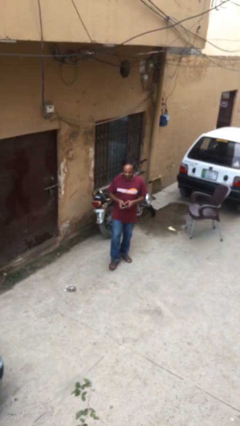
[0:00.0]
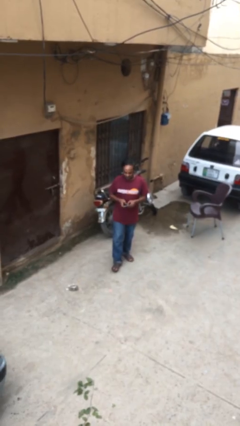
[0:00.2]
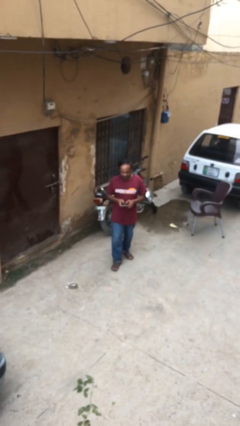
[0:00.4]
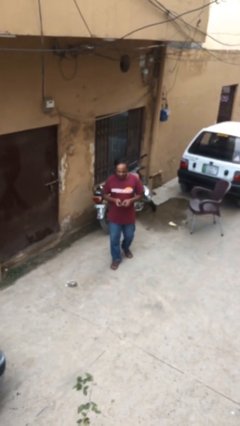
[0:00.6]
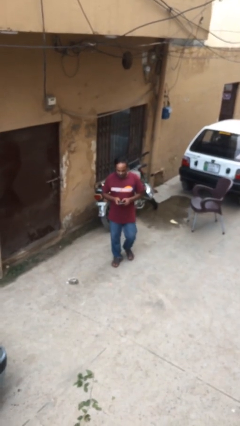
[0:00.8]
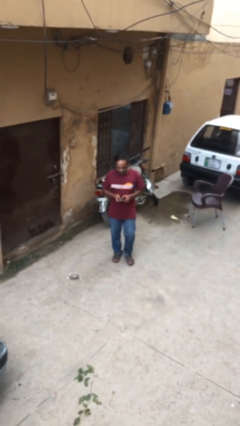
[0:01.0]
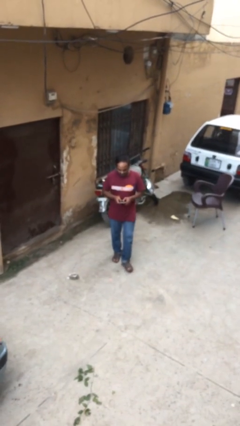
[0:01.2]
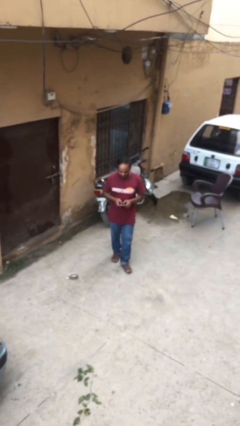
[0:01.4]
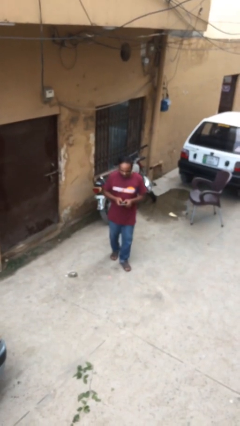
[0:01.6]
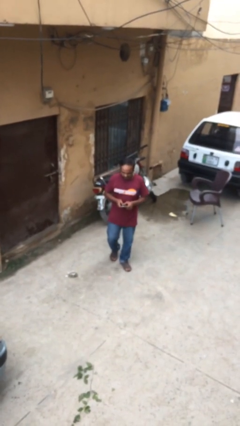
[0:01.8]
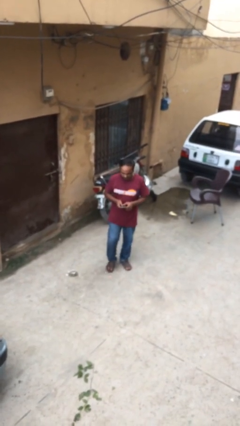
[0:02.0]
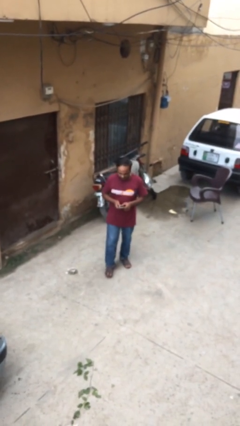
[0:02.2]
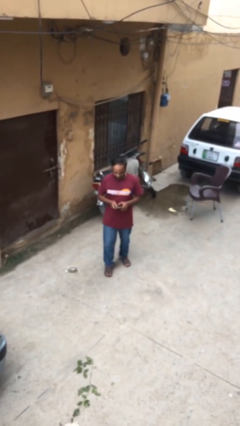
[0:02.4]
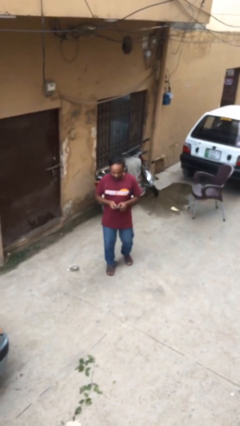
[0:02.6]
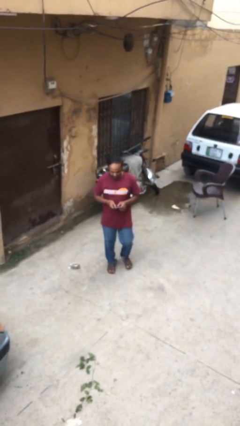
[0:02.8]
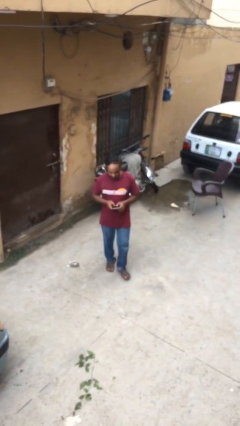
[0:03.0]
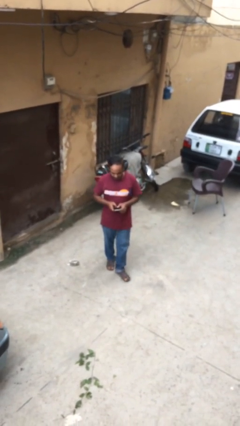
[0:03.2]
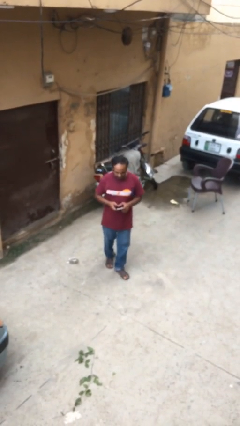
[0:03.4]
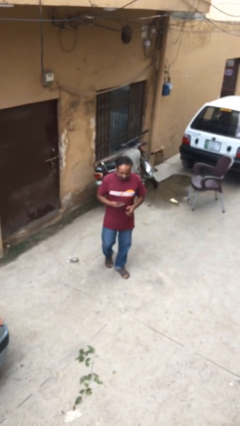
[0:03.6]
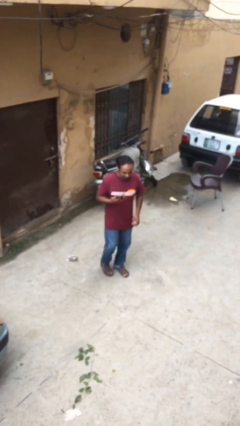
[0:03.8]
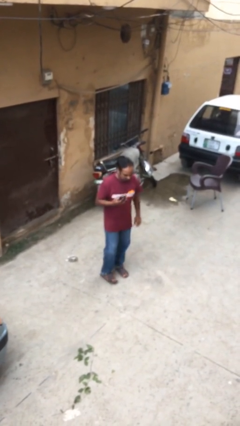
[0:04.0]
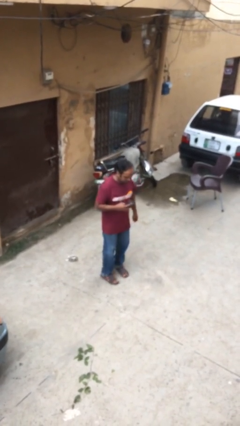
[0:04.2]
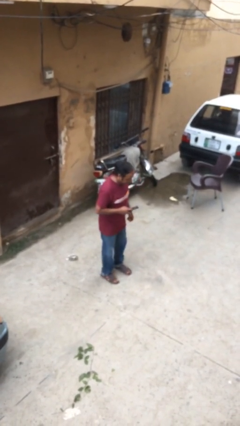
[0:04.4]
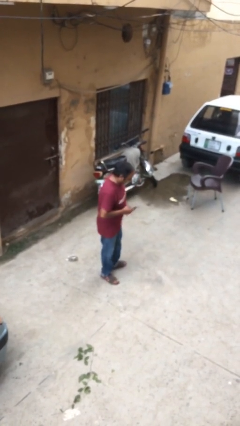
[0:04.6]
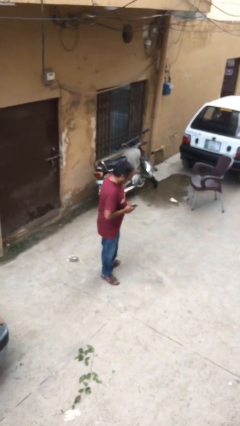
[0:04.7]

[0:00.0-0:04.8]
person texts on phone

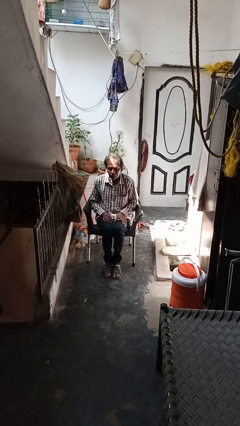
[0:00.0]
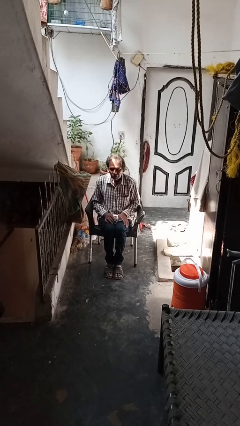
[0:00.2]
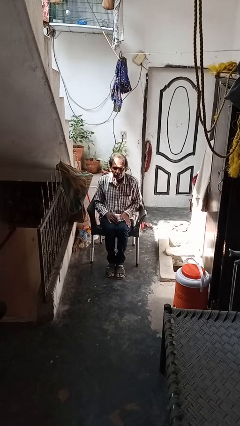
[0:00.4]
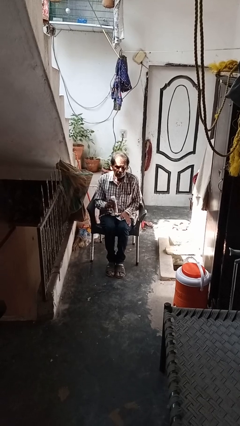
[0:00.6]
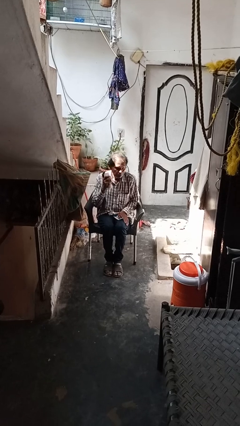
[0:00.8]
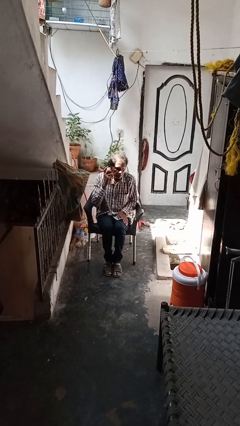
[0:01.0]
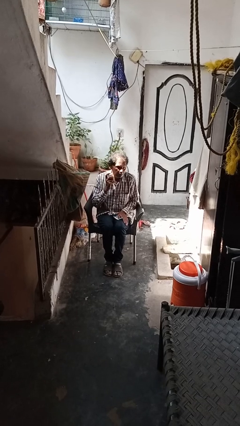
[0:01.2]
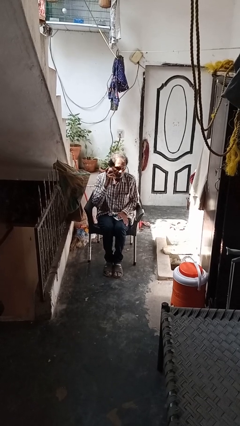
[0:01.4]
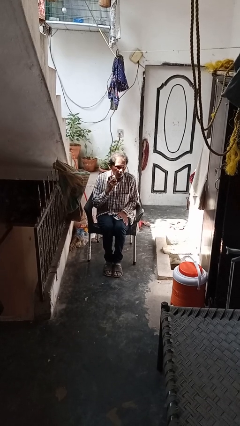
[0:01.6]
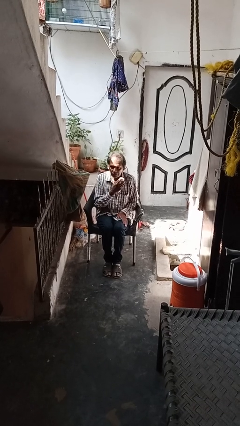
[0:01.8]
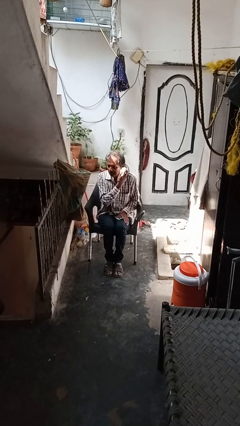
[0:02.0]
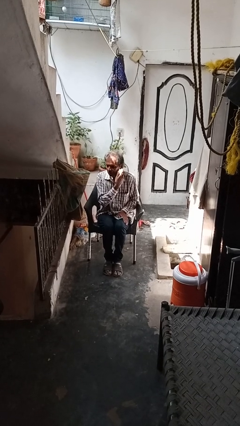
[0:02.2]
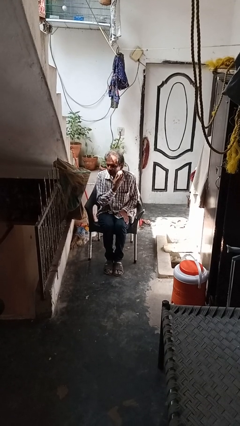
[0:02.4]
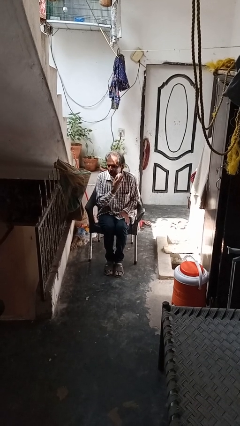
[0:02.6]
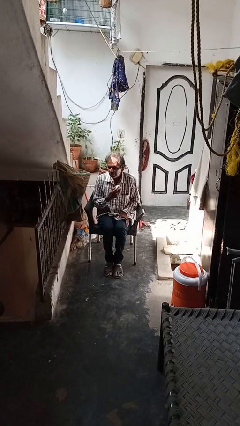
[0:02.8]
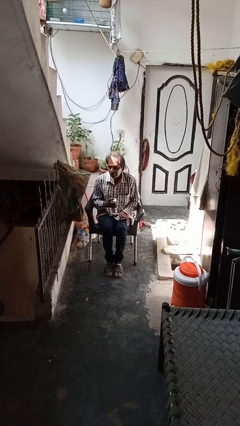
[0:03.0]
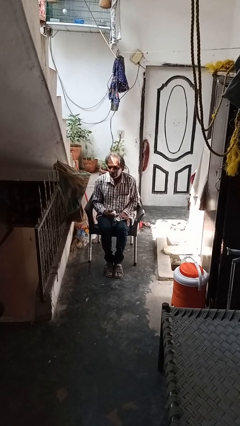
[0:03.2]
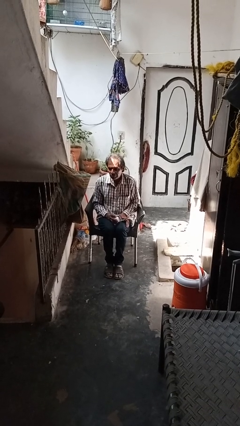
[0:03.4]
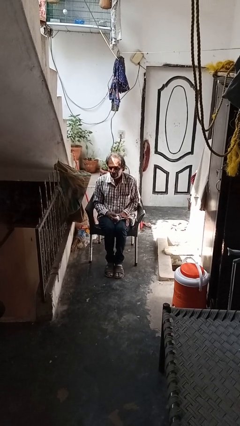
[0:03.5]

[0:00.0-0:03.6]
person applies shaving cream

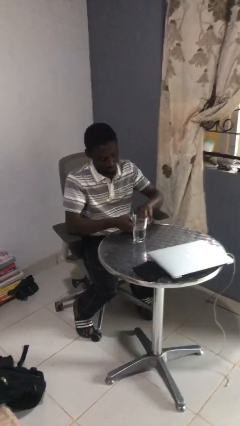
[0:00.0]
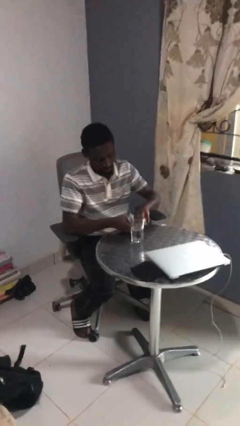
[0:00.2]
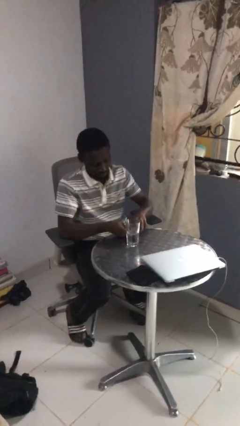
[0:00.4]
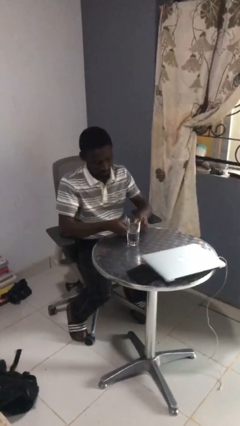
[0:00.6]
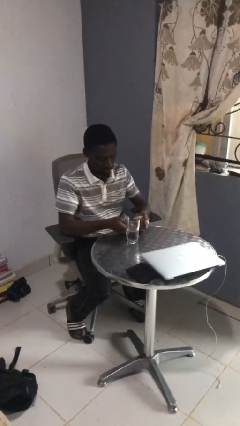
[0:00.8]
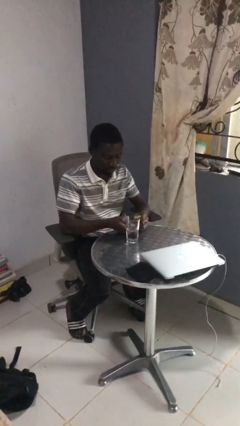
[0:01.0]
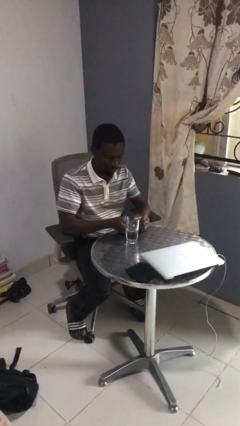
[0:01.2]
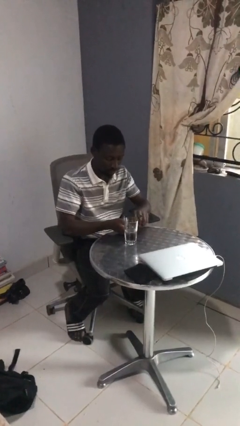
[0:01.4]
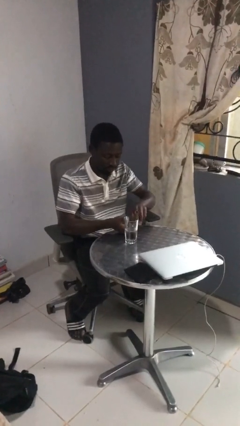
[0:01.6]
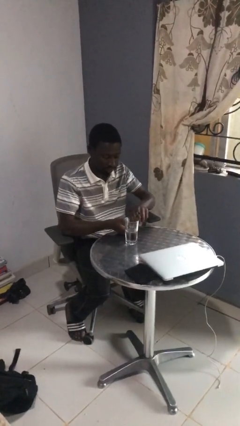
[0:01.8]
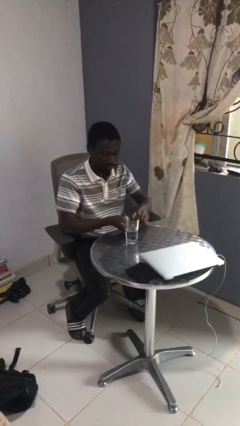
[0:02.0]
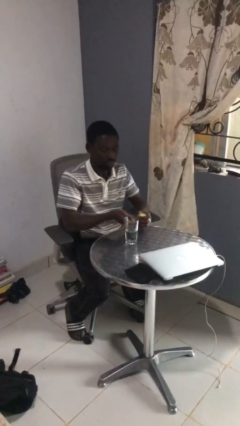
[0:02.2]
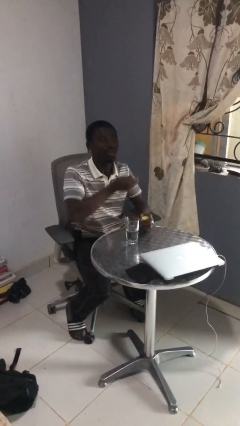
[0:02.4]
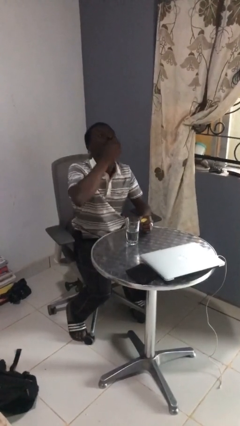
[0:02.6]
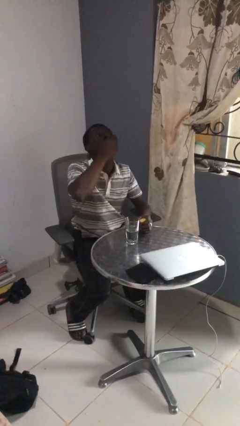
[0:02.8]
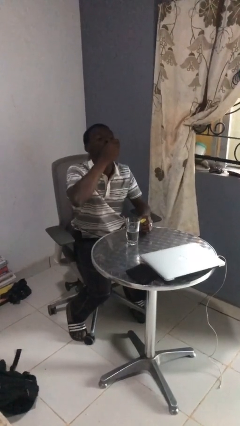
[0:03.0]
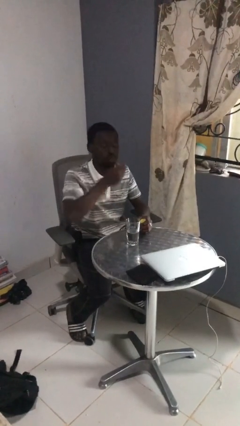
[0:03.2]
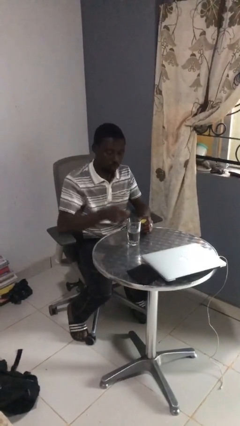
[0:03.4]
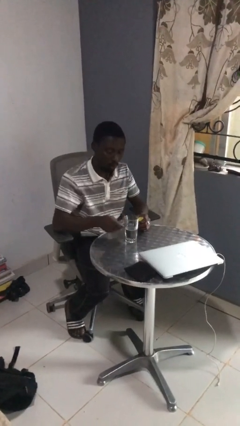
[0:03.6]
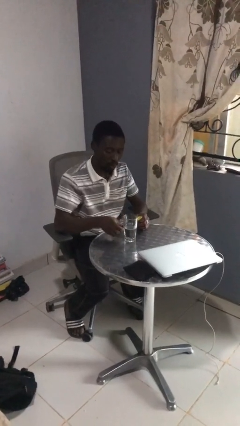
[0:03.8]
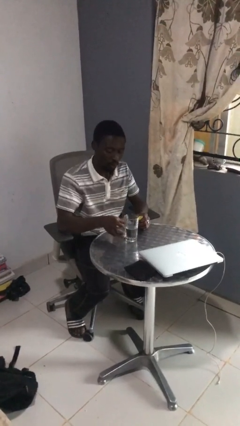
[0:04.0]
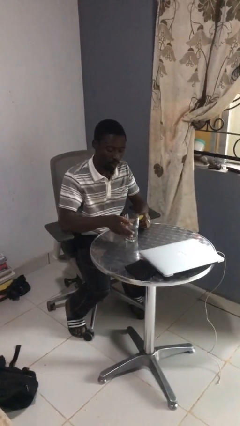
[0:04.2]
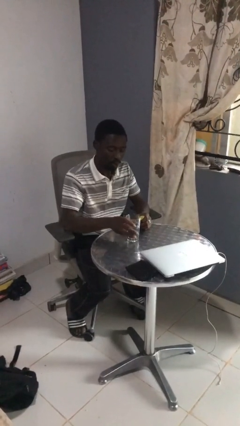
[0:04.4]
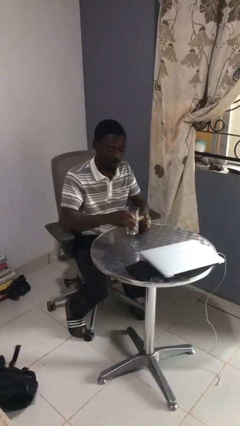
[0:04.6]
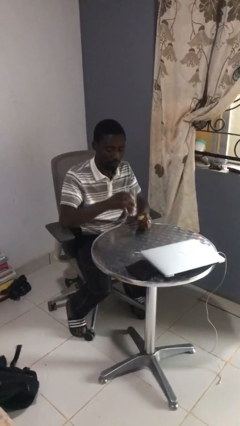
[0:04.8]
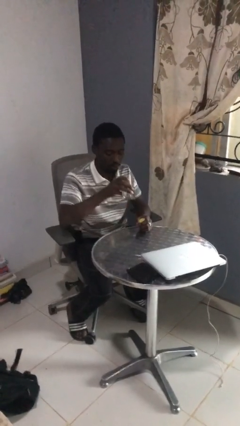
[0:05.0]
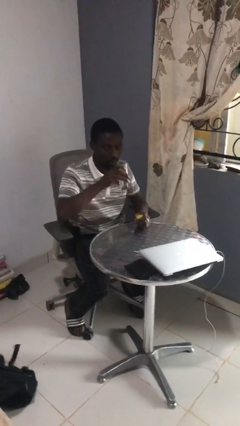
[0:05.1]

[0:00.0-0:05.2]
person takes medicine pills

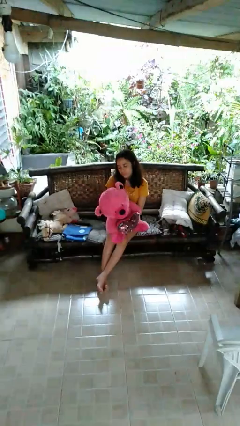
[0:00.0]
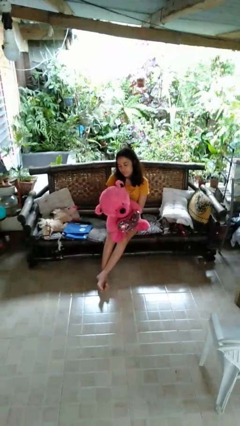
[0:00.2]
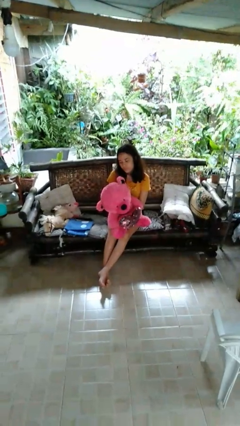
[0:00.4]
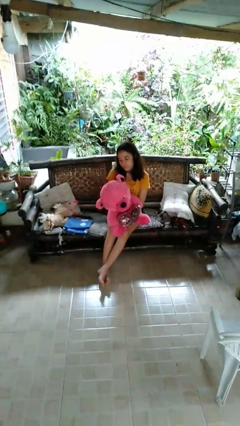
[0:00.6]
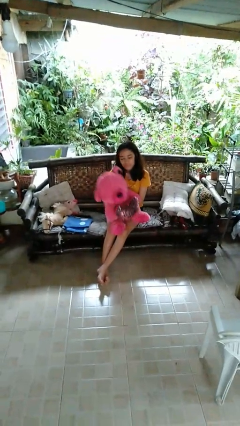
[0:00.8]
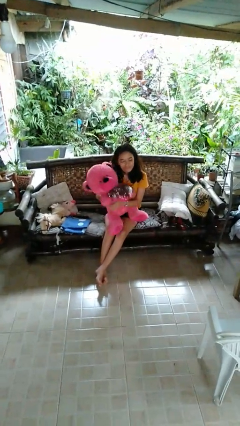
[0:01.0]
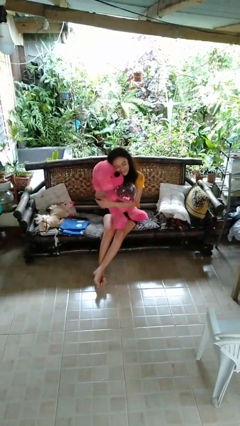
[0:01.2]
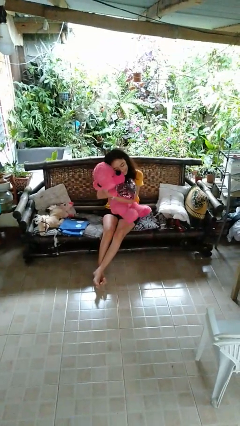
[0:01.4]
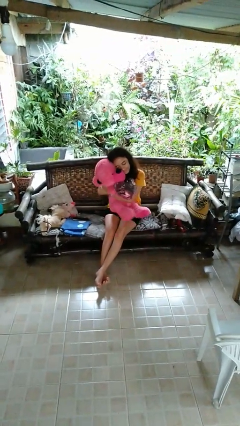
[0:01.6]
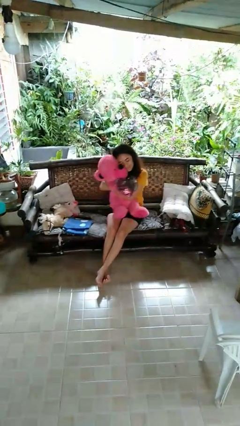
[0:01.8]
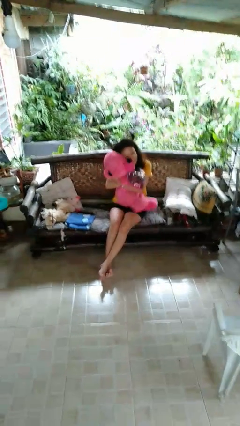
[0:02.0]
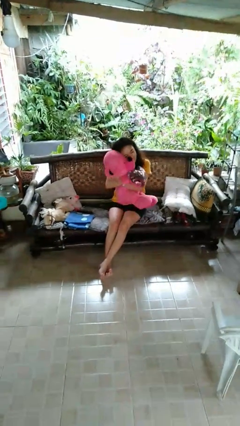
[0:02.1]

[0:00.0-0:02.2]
person hugs stuffed animal

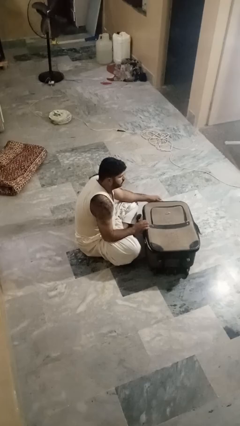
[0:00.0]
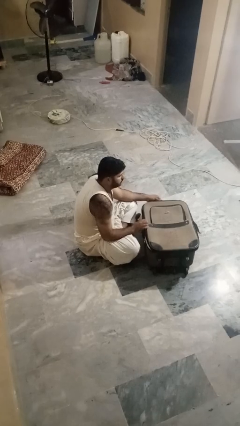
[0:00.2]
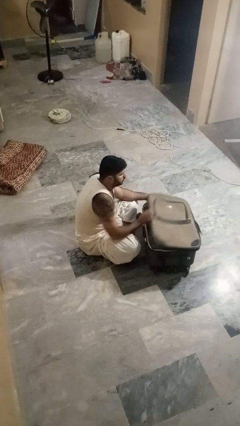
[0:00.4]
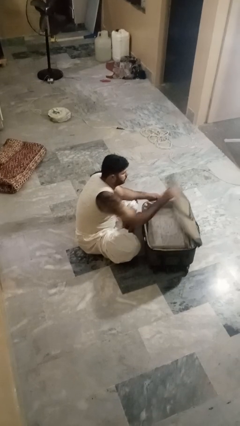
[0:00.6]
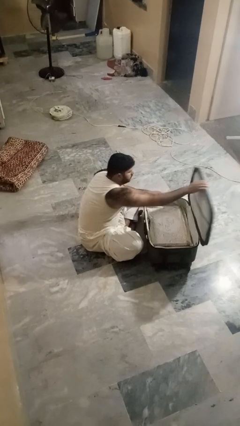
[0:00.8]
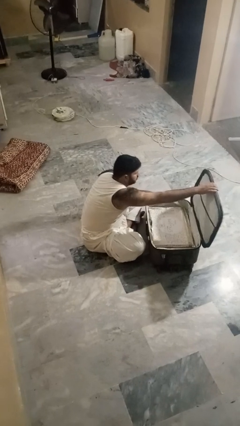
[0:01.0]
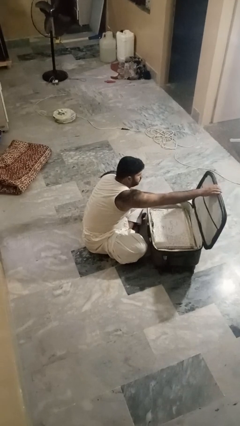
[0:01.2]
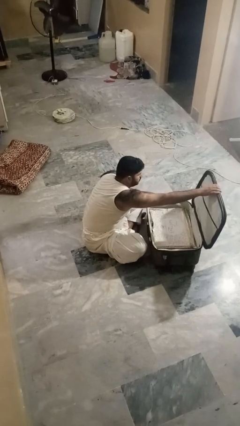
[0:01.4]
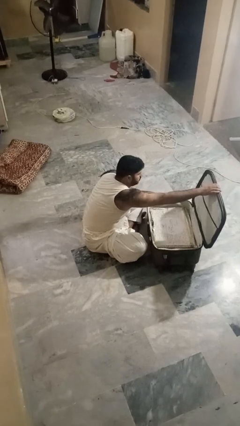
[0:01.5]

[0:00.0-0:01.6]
person opens suitcase
